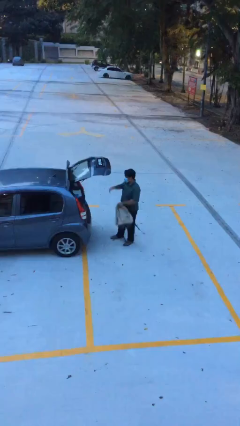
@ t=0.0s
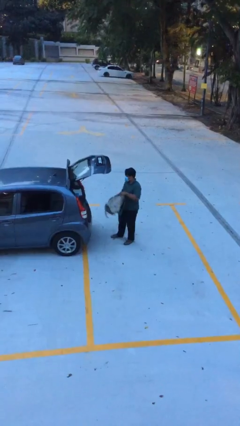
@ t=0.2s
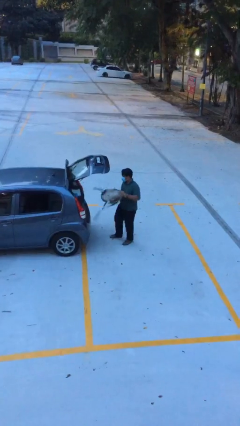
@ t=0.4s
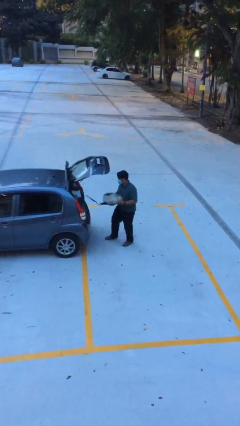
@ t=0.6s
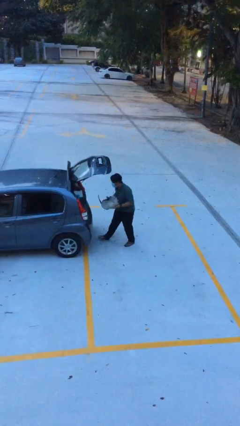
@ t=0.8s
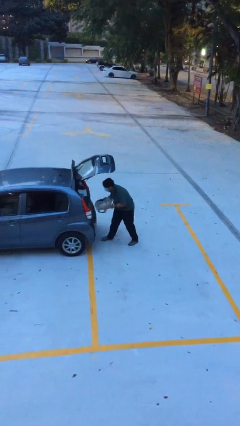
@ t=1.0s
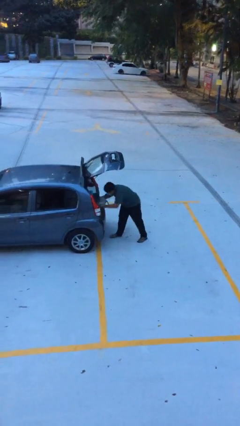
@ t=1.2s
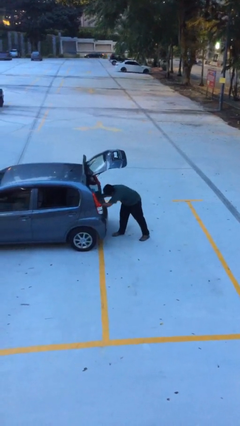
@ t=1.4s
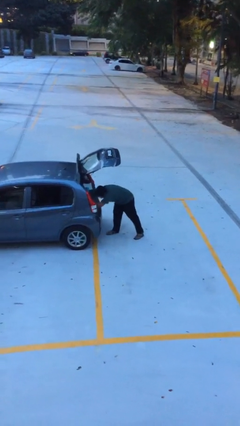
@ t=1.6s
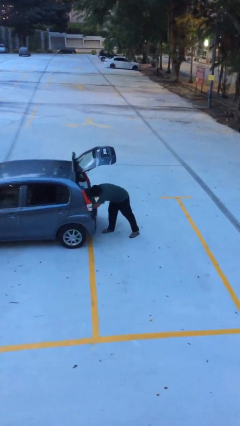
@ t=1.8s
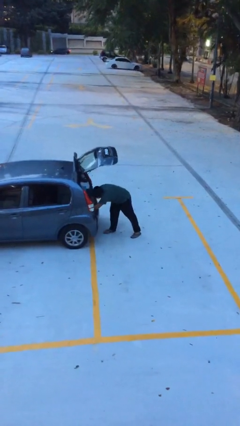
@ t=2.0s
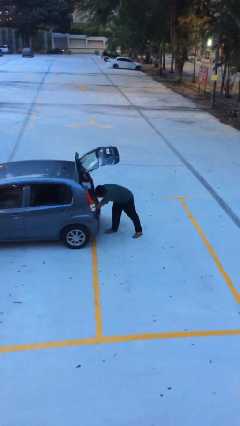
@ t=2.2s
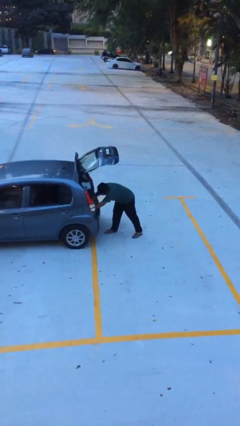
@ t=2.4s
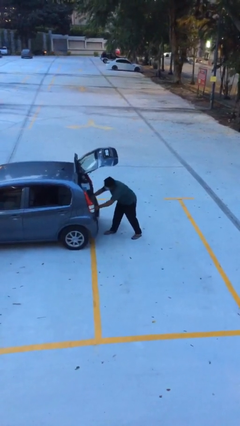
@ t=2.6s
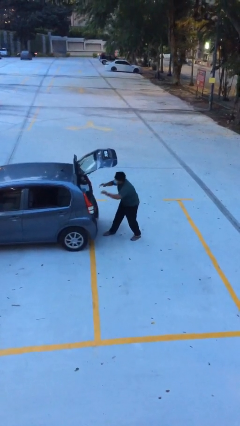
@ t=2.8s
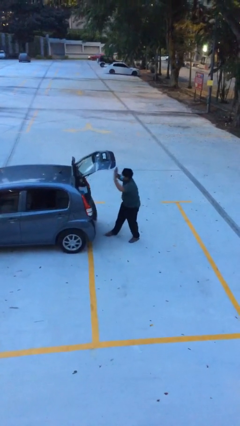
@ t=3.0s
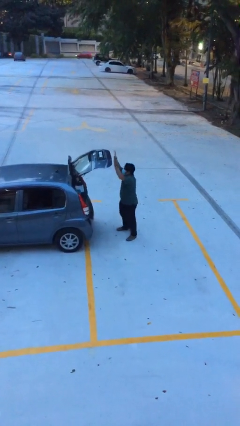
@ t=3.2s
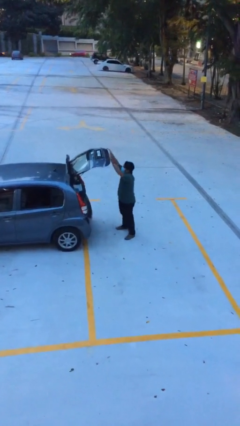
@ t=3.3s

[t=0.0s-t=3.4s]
person loads car

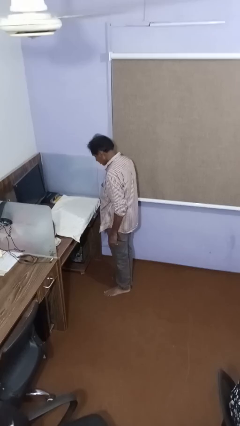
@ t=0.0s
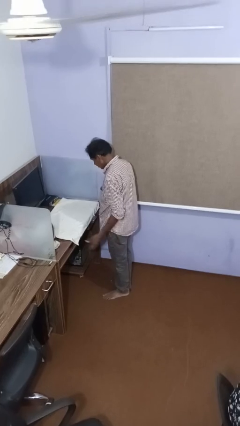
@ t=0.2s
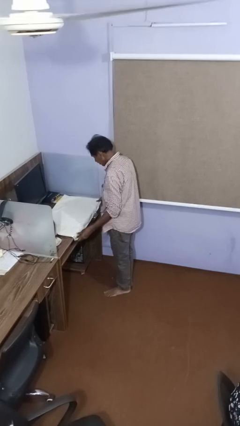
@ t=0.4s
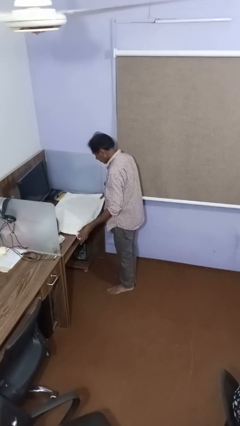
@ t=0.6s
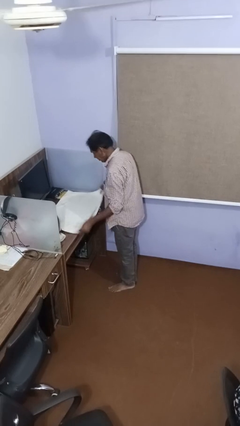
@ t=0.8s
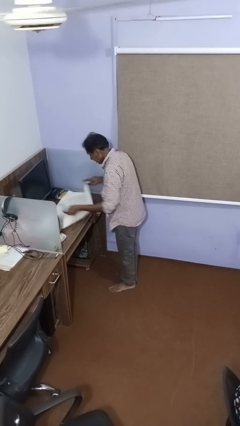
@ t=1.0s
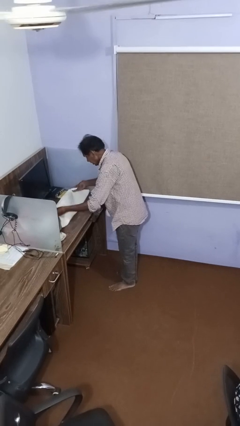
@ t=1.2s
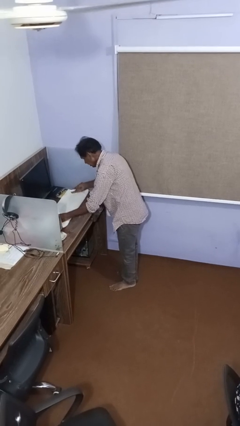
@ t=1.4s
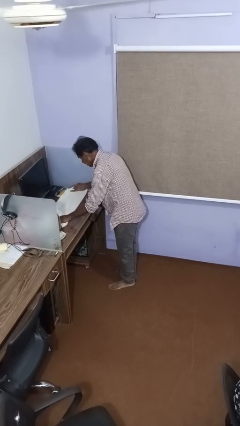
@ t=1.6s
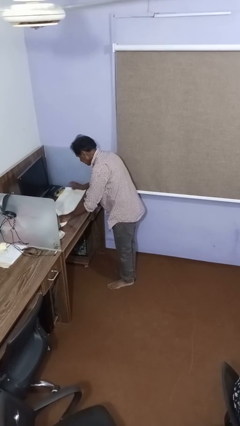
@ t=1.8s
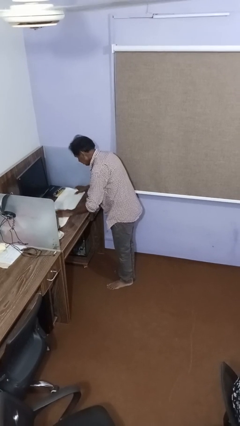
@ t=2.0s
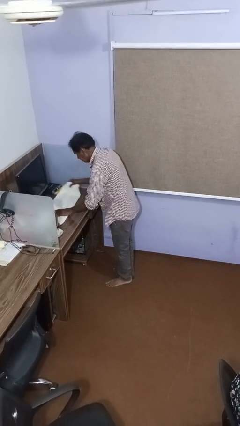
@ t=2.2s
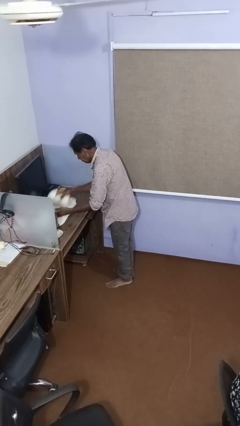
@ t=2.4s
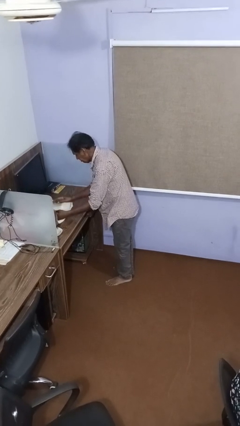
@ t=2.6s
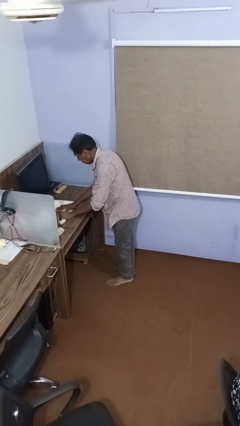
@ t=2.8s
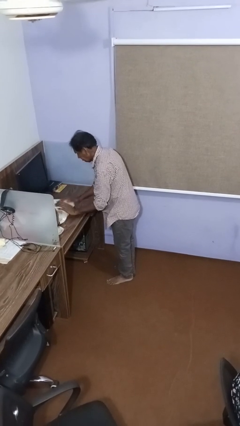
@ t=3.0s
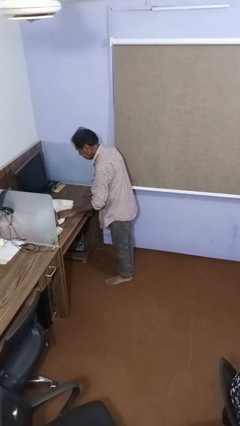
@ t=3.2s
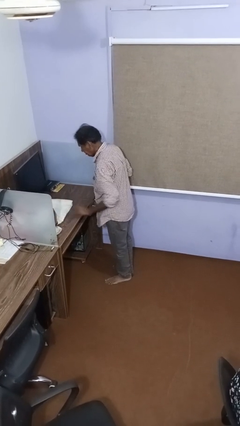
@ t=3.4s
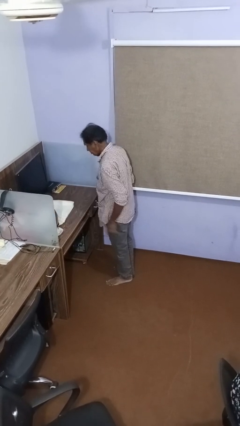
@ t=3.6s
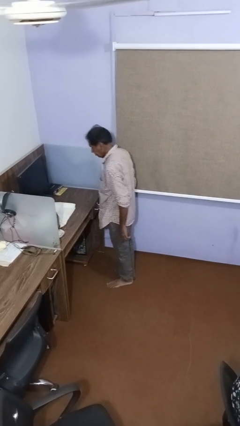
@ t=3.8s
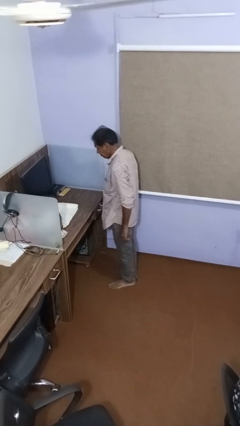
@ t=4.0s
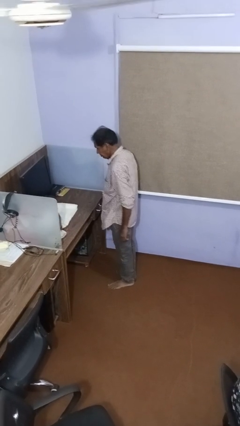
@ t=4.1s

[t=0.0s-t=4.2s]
person folds towel

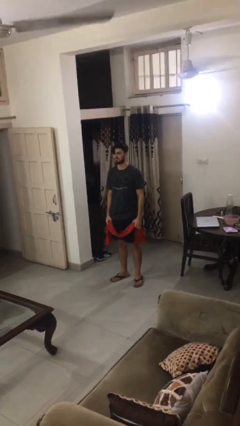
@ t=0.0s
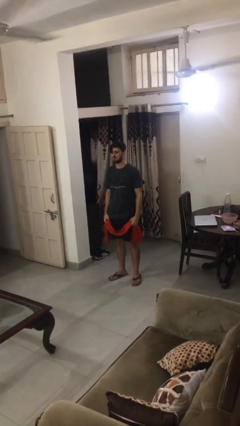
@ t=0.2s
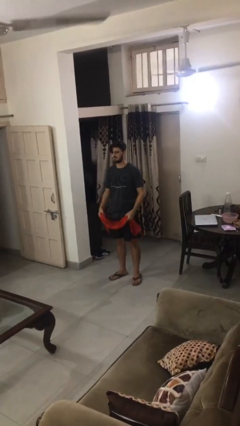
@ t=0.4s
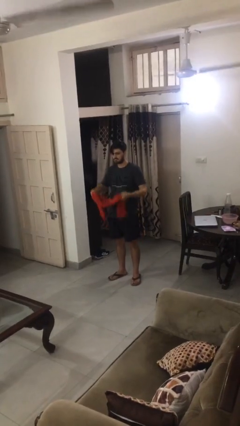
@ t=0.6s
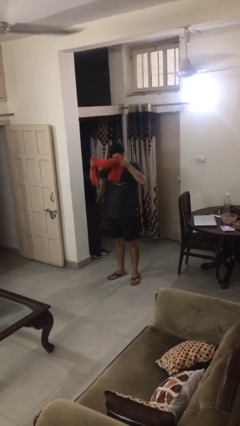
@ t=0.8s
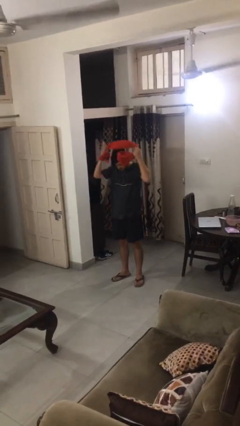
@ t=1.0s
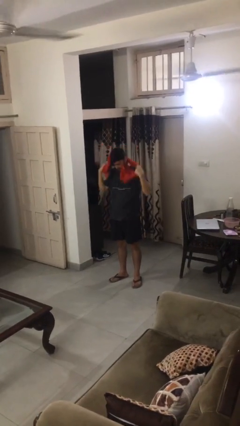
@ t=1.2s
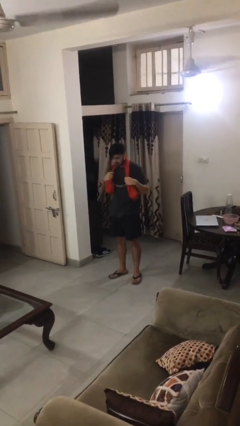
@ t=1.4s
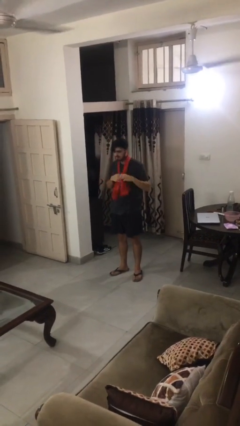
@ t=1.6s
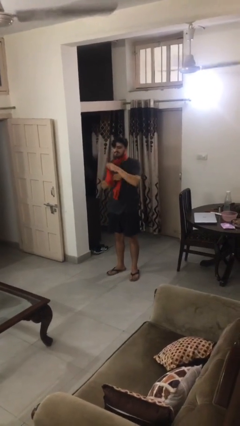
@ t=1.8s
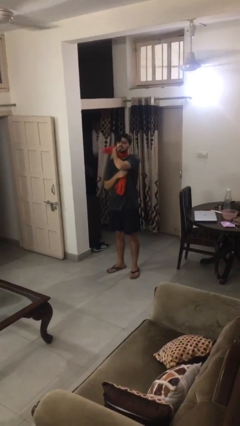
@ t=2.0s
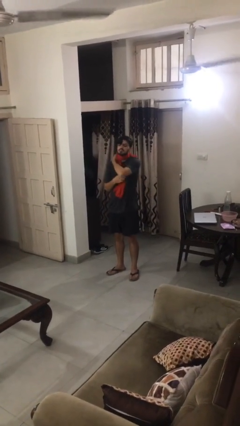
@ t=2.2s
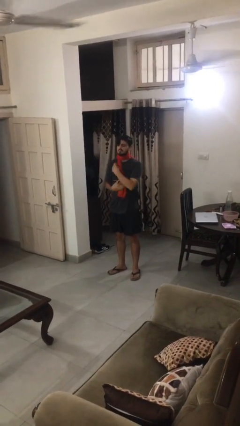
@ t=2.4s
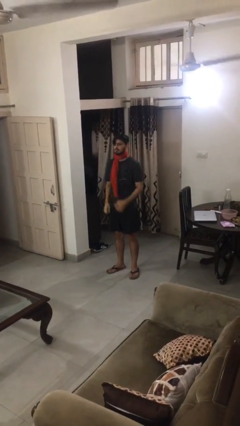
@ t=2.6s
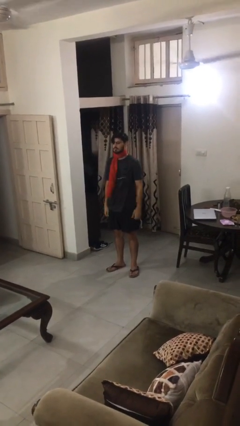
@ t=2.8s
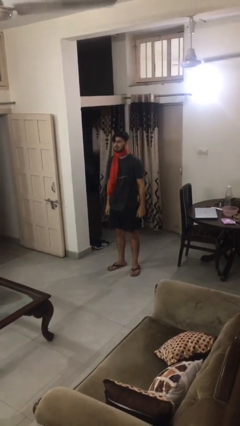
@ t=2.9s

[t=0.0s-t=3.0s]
person puts on scarf

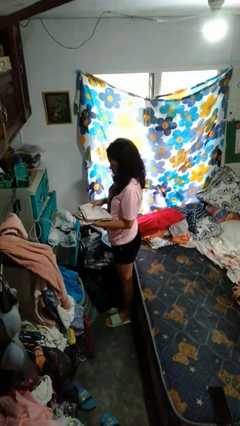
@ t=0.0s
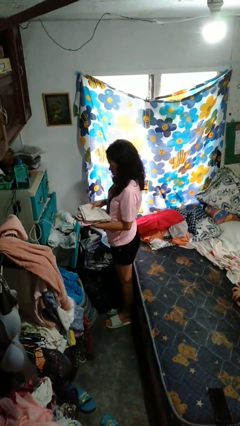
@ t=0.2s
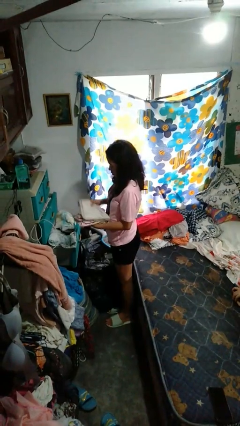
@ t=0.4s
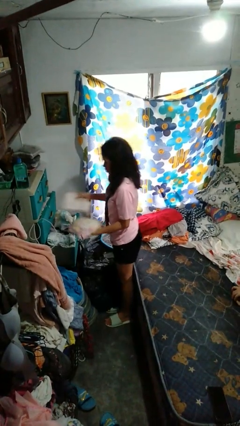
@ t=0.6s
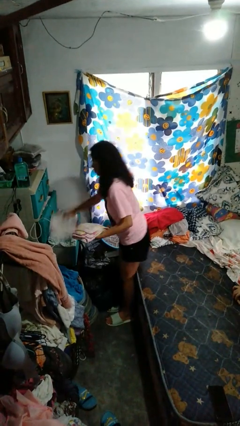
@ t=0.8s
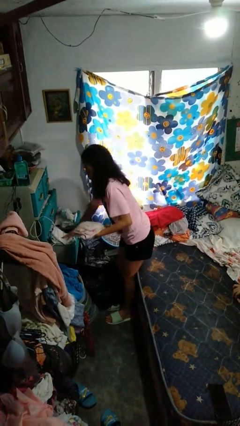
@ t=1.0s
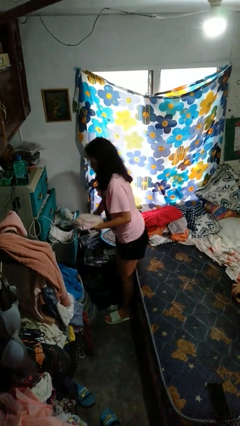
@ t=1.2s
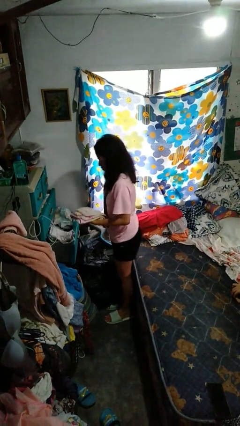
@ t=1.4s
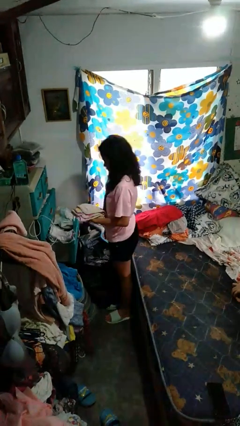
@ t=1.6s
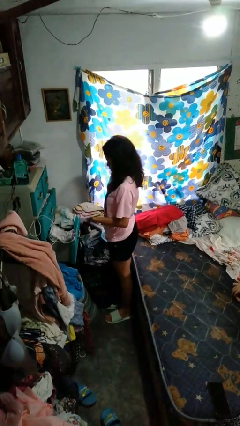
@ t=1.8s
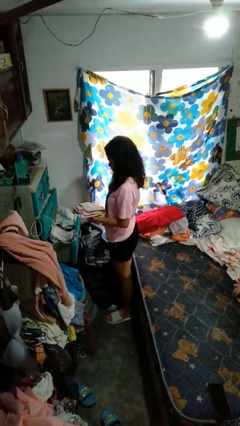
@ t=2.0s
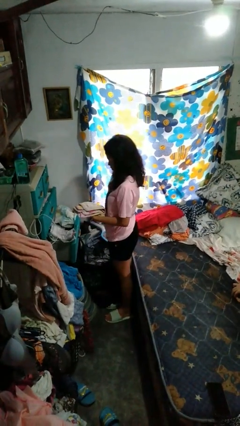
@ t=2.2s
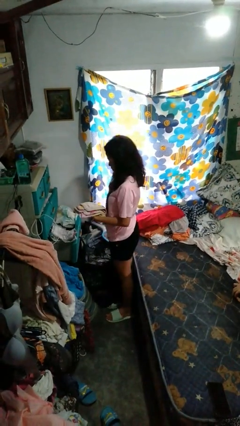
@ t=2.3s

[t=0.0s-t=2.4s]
person puts clothes into dresser

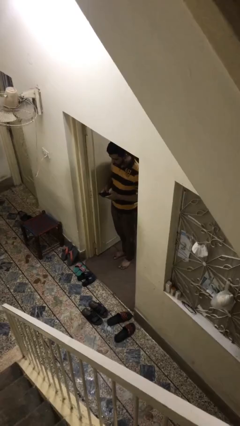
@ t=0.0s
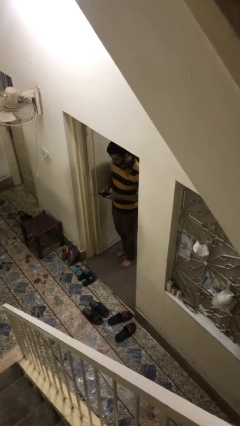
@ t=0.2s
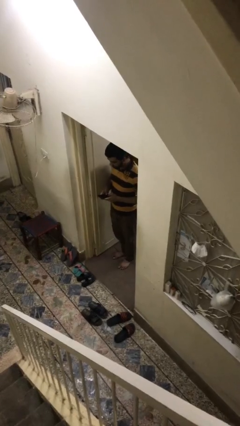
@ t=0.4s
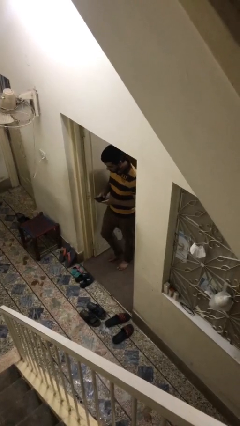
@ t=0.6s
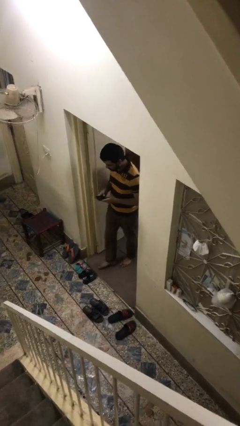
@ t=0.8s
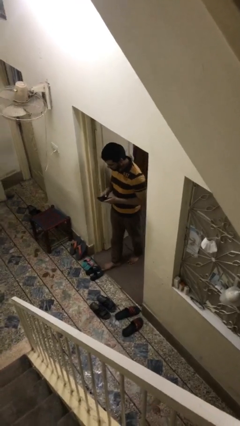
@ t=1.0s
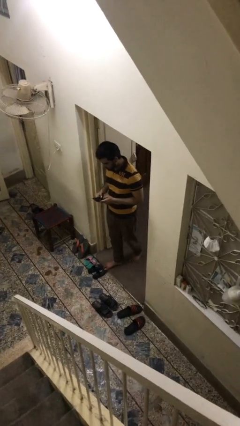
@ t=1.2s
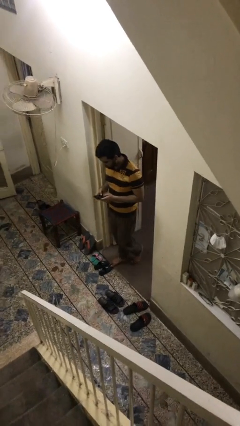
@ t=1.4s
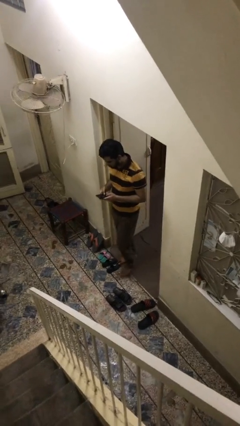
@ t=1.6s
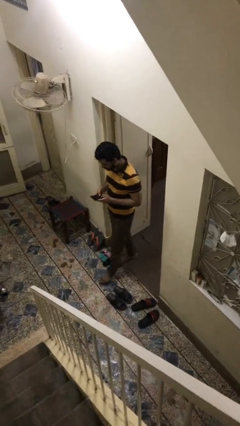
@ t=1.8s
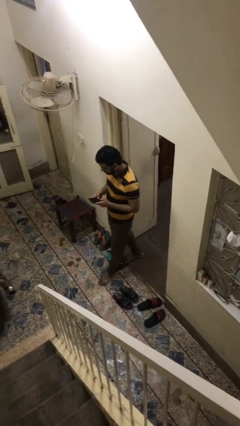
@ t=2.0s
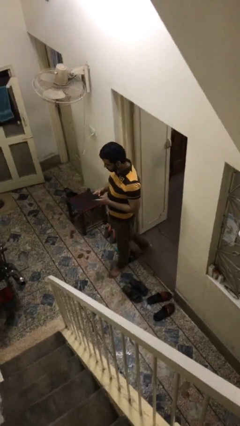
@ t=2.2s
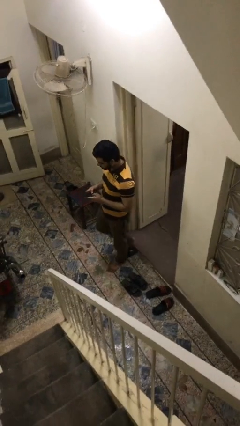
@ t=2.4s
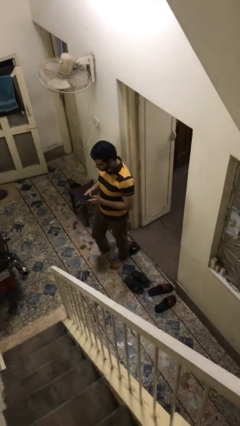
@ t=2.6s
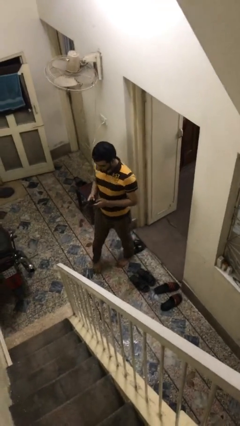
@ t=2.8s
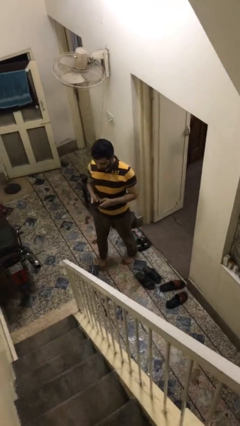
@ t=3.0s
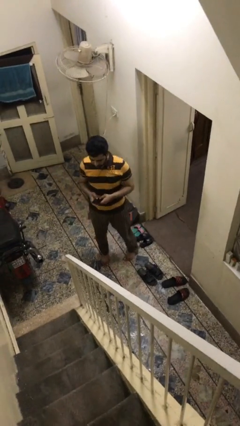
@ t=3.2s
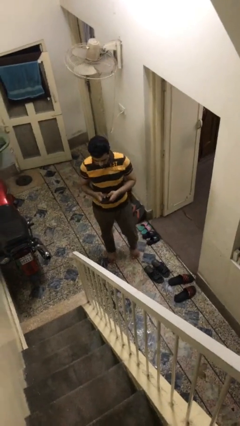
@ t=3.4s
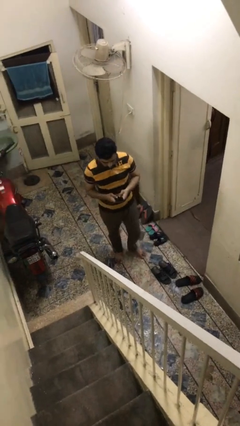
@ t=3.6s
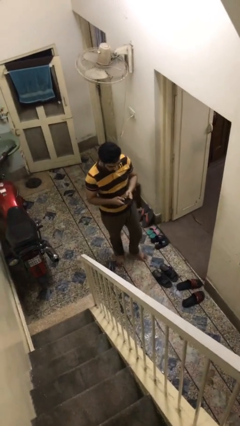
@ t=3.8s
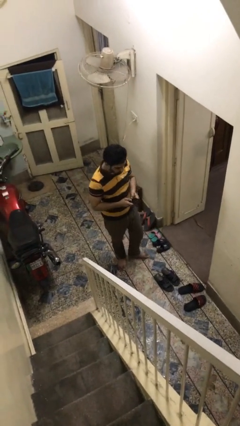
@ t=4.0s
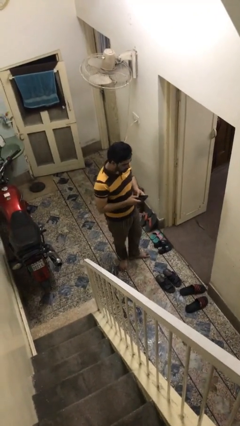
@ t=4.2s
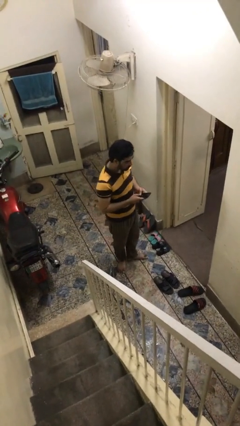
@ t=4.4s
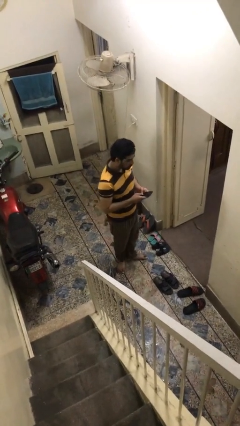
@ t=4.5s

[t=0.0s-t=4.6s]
person enters scene through structure

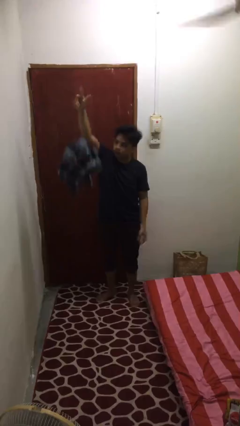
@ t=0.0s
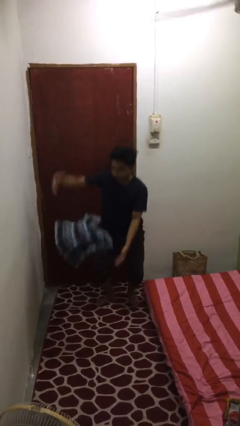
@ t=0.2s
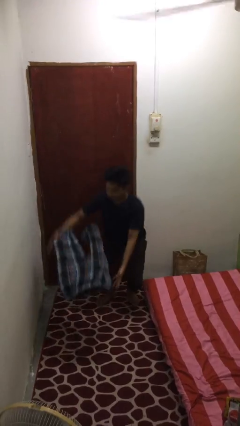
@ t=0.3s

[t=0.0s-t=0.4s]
person drops object
